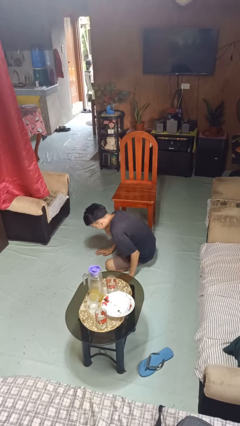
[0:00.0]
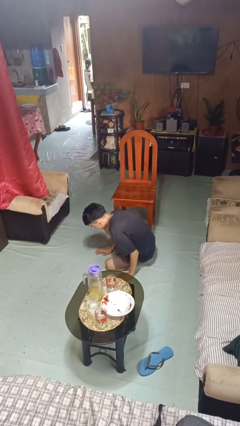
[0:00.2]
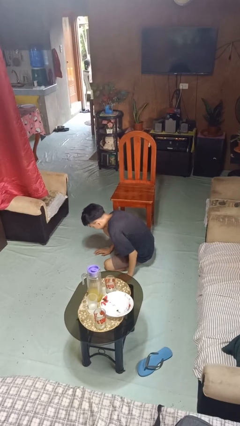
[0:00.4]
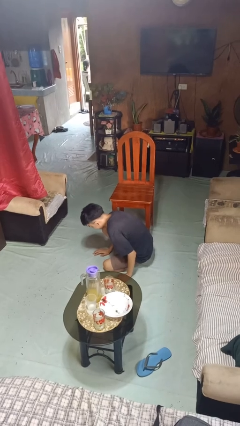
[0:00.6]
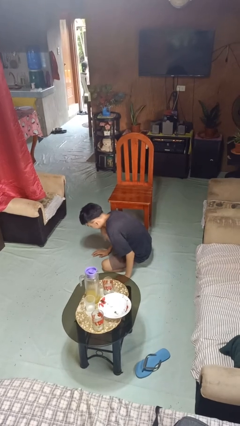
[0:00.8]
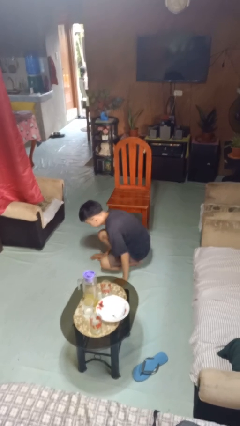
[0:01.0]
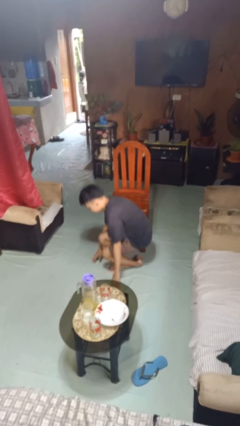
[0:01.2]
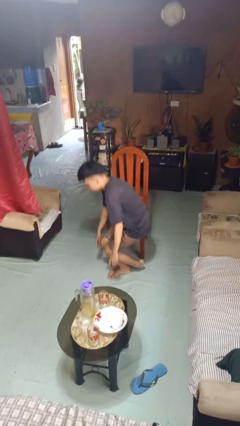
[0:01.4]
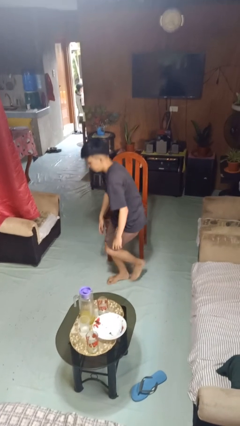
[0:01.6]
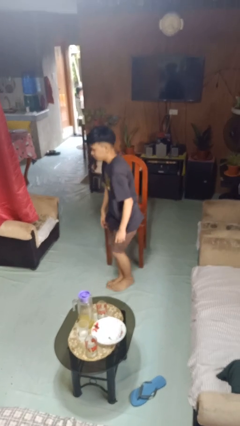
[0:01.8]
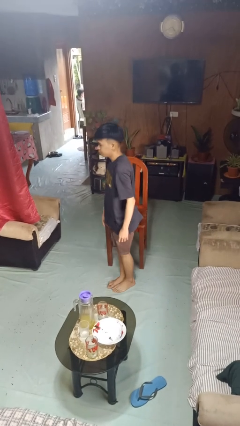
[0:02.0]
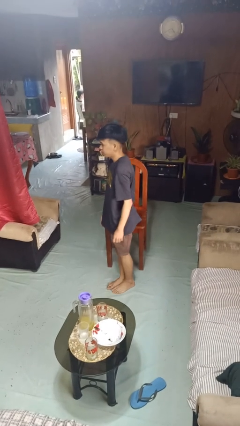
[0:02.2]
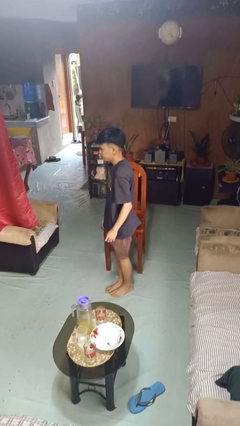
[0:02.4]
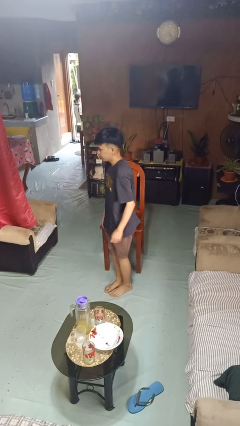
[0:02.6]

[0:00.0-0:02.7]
person stands up from floor

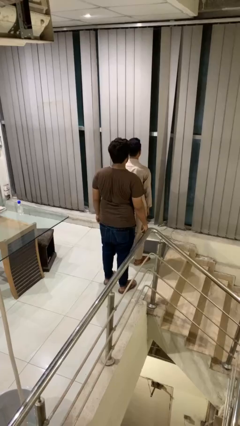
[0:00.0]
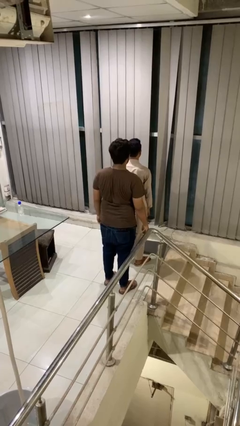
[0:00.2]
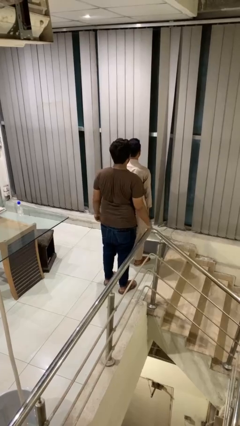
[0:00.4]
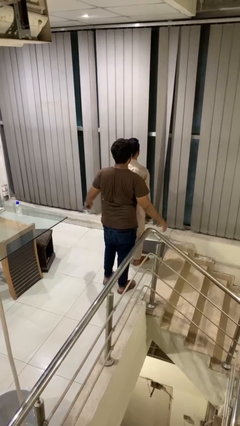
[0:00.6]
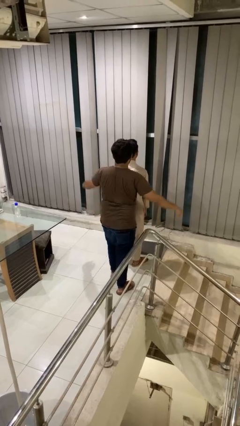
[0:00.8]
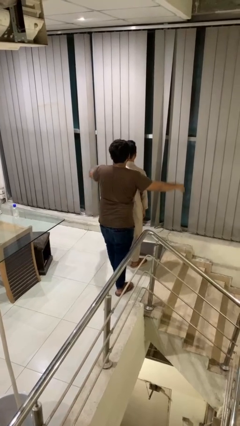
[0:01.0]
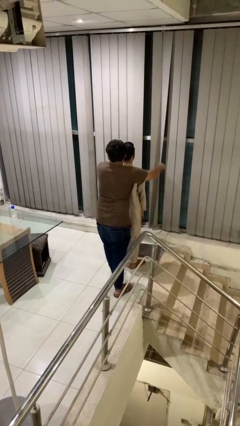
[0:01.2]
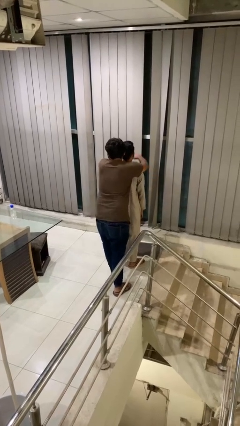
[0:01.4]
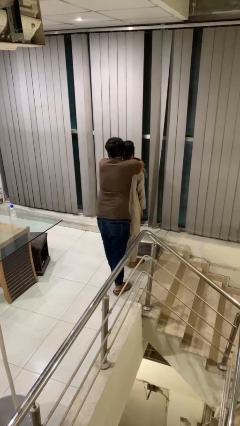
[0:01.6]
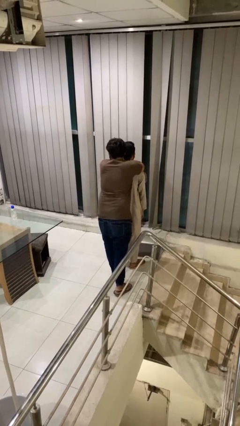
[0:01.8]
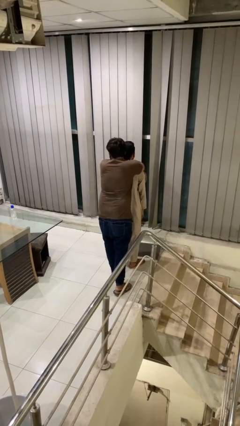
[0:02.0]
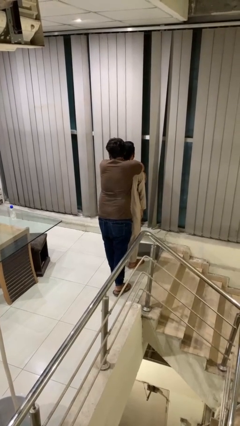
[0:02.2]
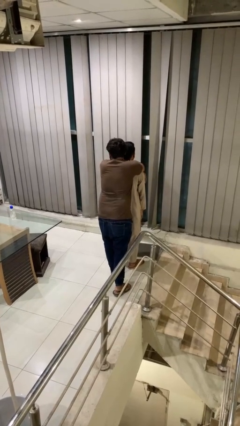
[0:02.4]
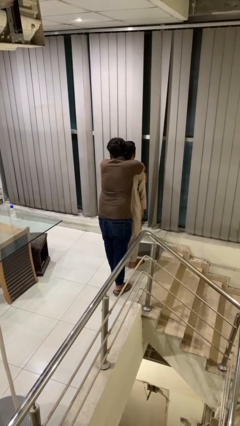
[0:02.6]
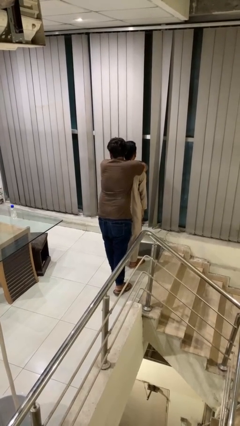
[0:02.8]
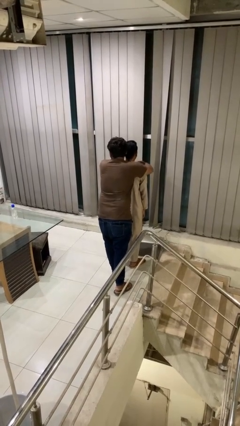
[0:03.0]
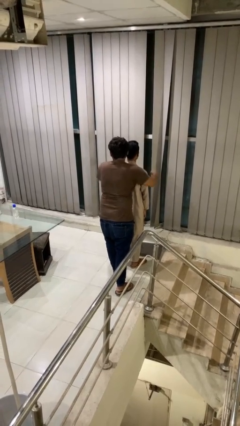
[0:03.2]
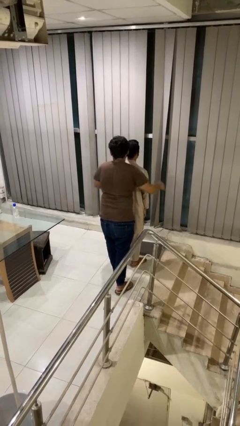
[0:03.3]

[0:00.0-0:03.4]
person hugs person from behind

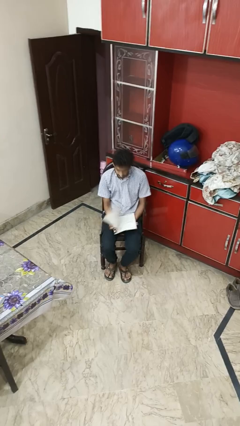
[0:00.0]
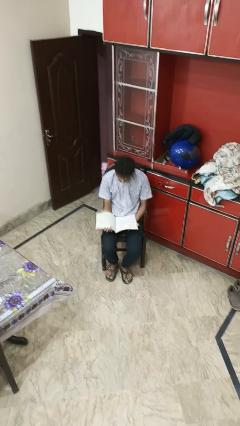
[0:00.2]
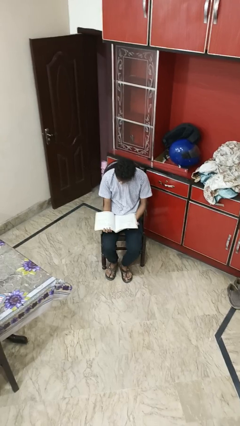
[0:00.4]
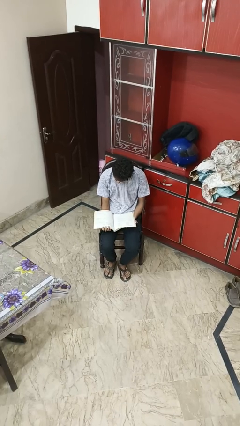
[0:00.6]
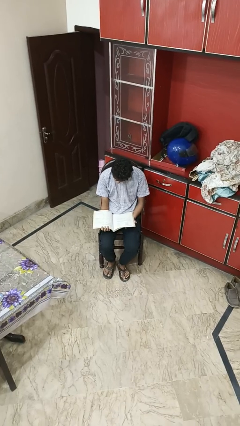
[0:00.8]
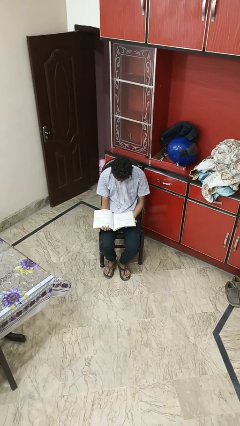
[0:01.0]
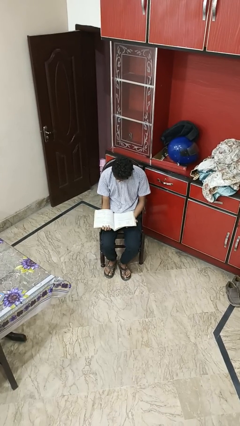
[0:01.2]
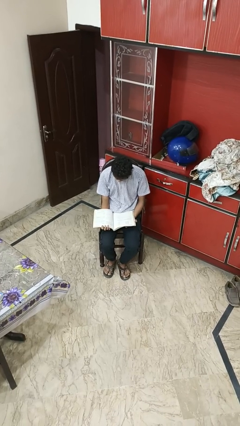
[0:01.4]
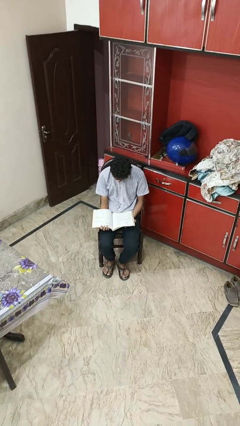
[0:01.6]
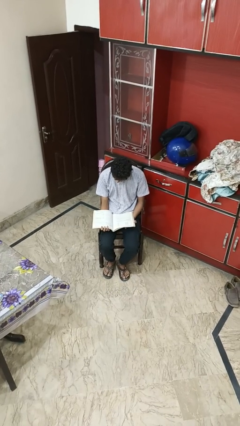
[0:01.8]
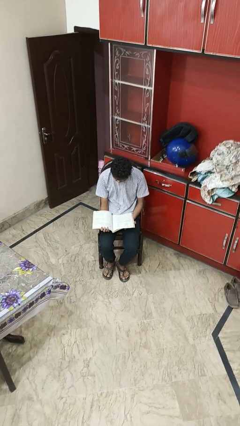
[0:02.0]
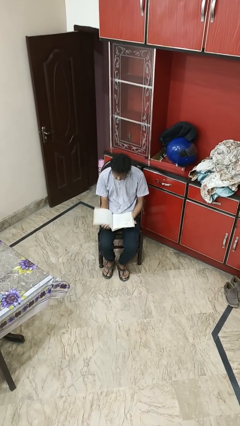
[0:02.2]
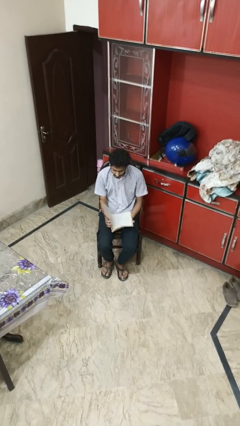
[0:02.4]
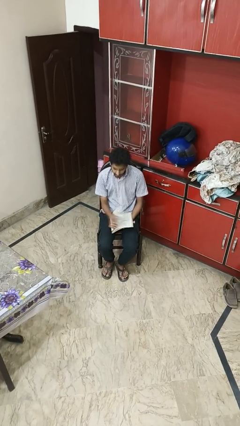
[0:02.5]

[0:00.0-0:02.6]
person reads magazine

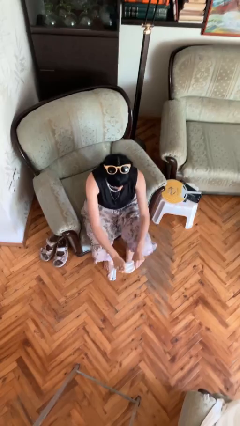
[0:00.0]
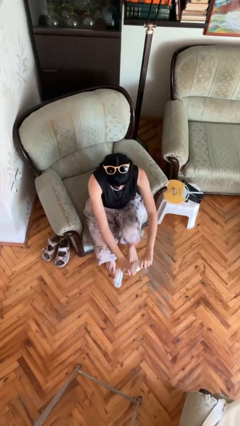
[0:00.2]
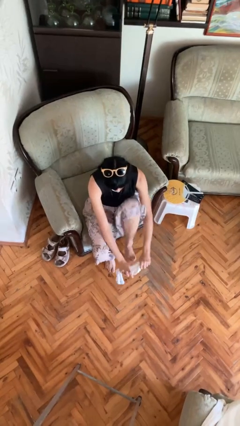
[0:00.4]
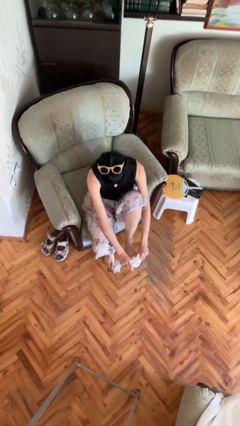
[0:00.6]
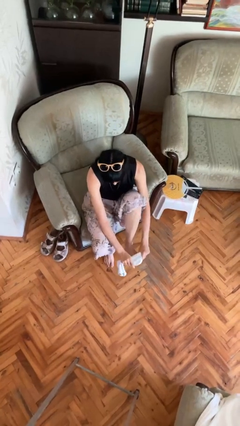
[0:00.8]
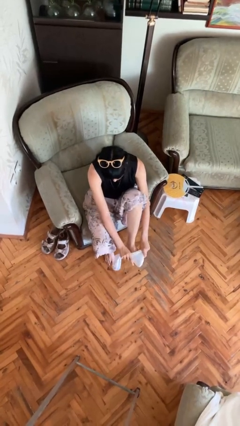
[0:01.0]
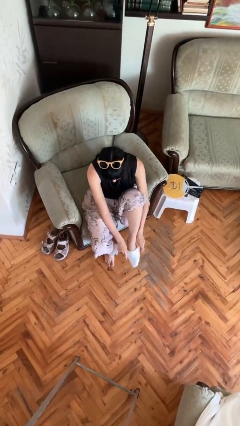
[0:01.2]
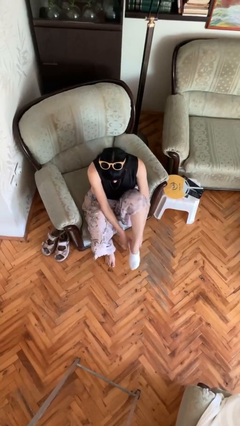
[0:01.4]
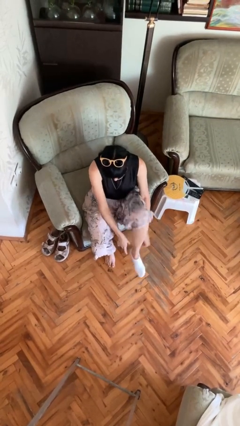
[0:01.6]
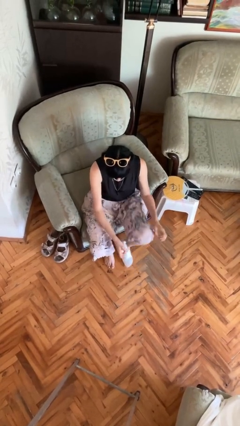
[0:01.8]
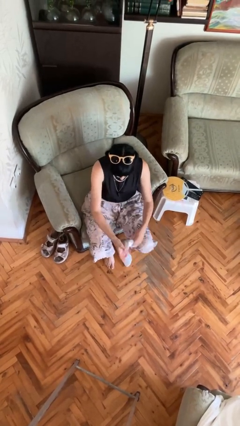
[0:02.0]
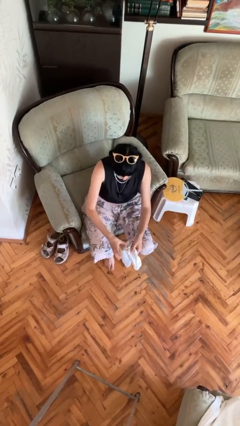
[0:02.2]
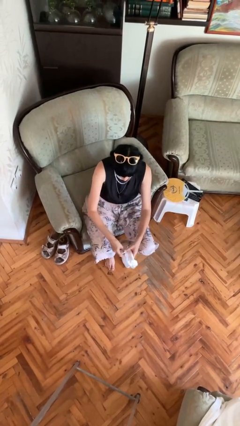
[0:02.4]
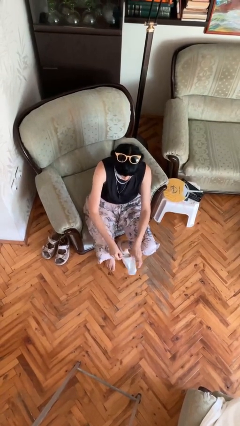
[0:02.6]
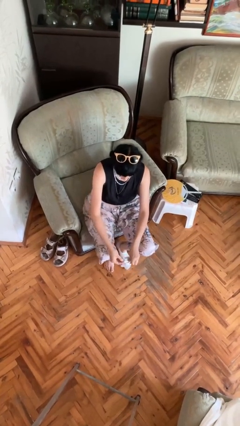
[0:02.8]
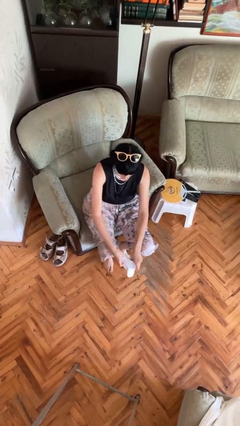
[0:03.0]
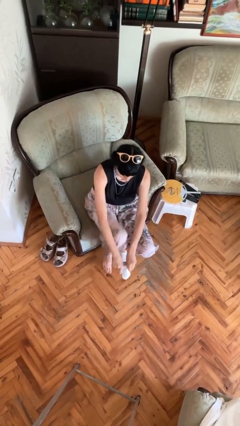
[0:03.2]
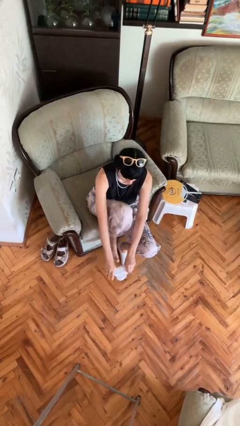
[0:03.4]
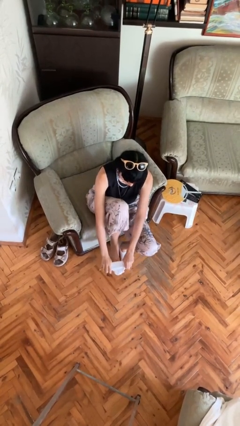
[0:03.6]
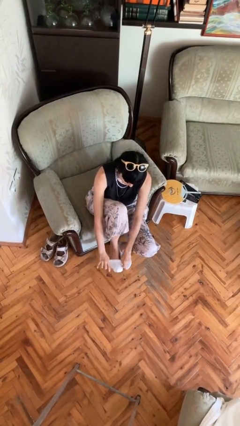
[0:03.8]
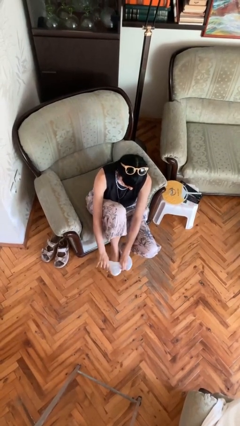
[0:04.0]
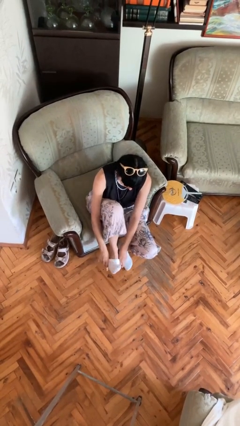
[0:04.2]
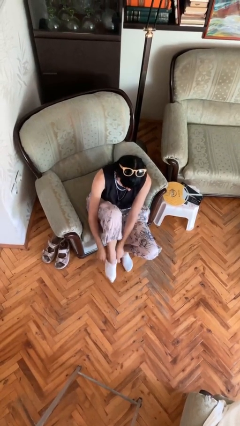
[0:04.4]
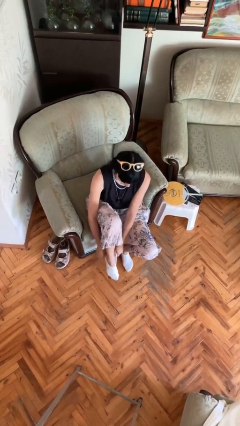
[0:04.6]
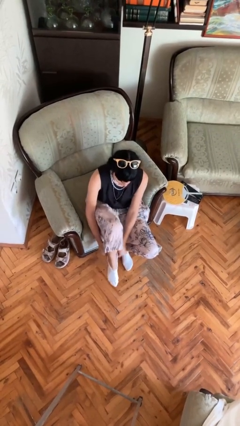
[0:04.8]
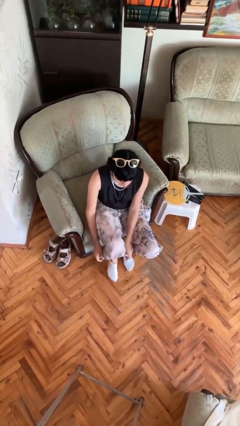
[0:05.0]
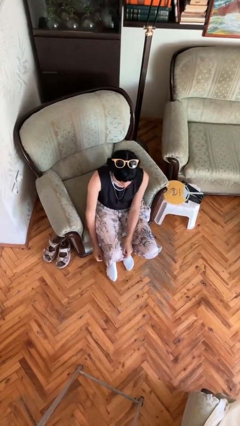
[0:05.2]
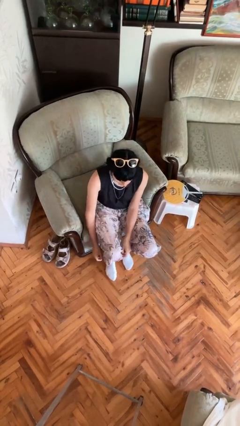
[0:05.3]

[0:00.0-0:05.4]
person puts on socks

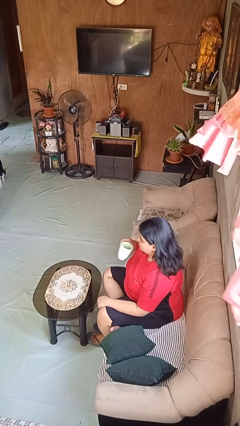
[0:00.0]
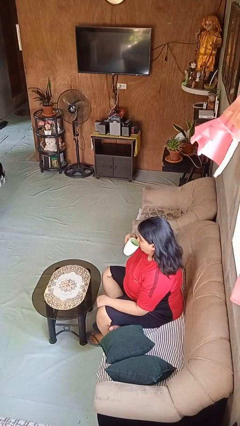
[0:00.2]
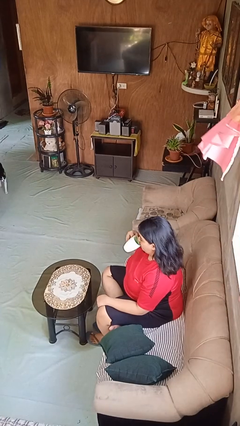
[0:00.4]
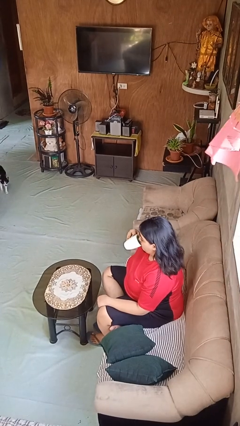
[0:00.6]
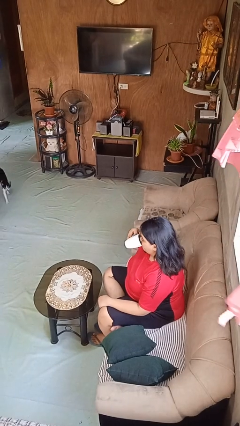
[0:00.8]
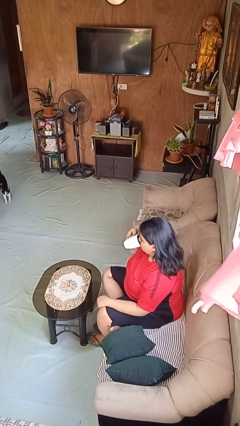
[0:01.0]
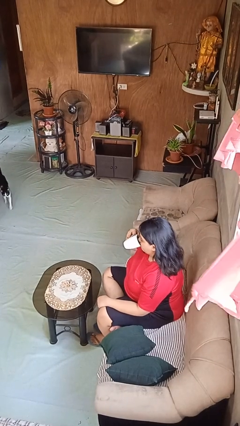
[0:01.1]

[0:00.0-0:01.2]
person drinks from mug

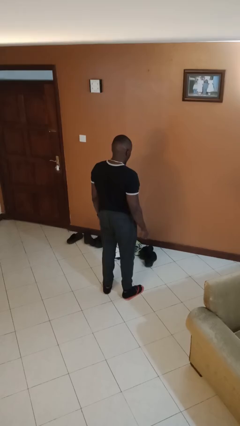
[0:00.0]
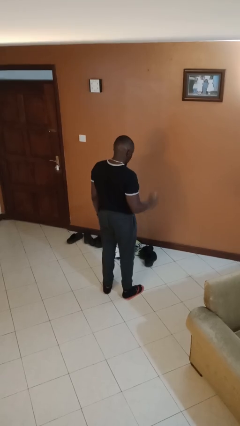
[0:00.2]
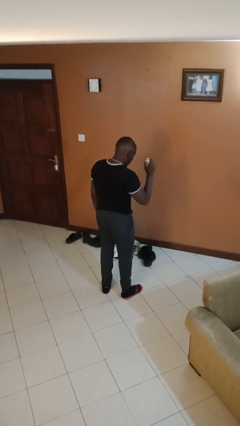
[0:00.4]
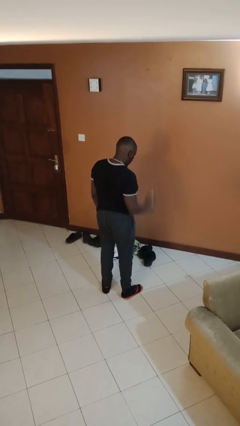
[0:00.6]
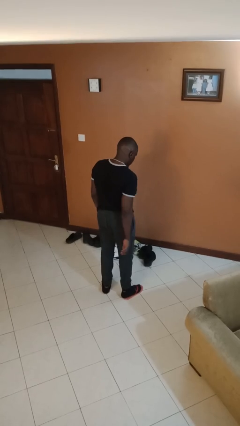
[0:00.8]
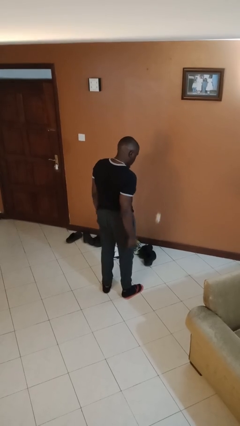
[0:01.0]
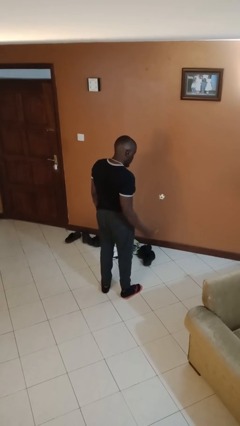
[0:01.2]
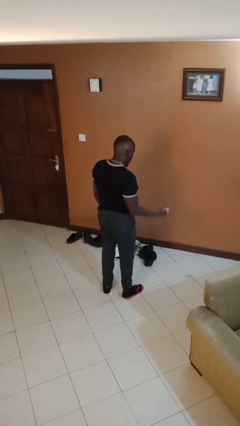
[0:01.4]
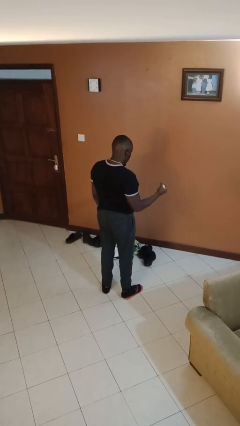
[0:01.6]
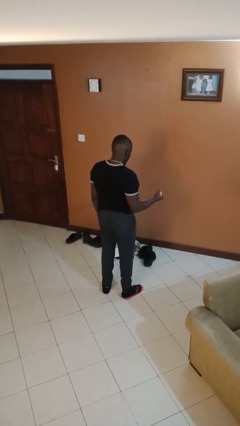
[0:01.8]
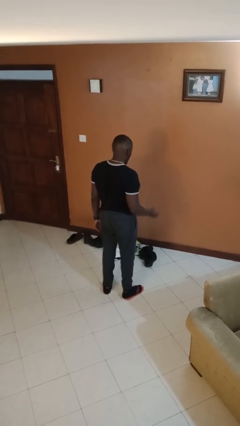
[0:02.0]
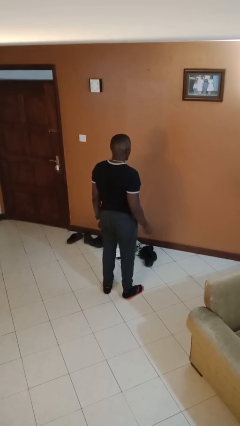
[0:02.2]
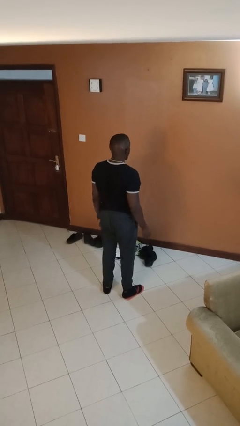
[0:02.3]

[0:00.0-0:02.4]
person bounces ball on floor
